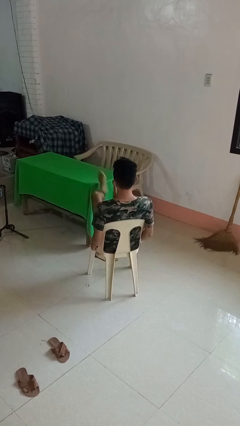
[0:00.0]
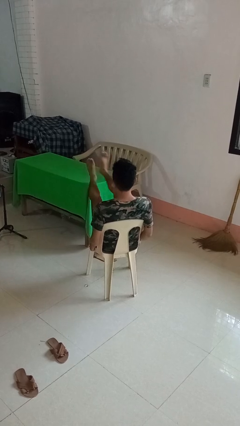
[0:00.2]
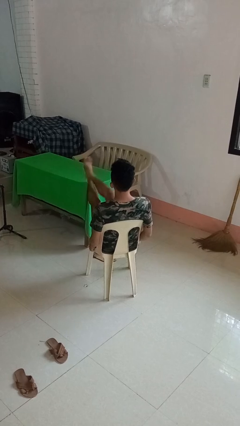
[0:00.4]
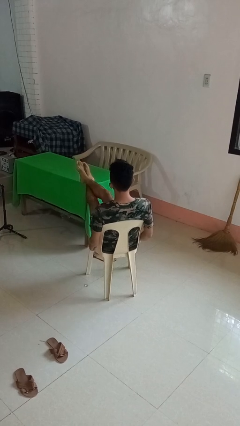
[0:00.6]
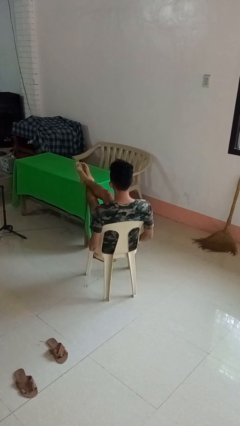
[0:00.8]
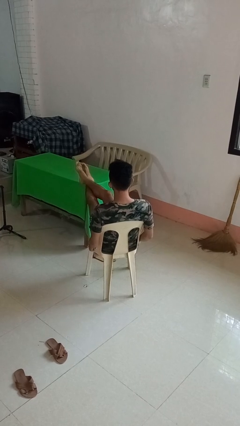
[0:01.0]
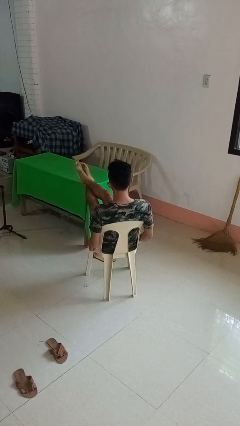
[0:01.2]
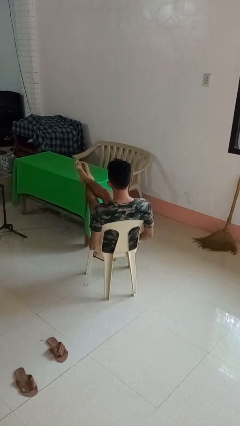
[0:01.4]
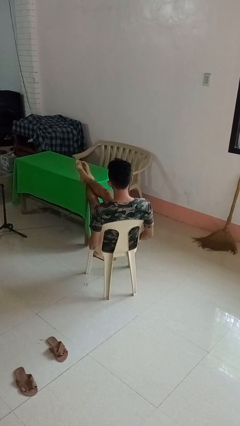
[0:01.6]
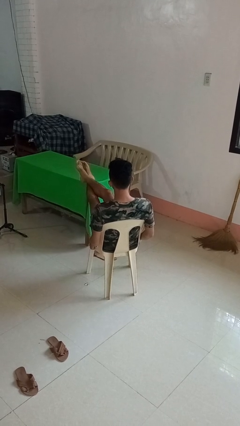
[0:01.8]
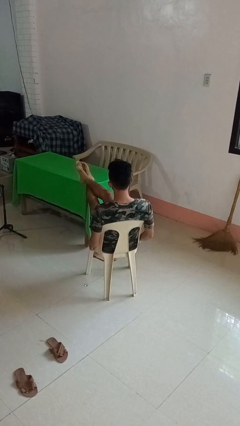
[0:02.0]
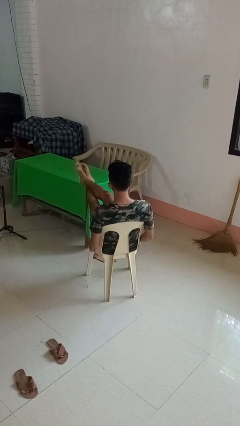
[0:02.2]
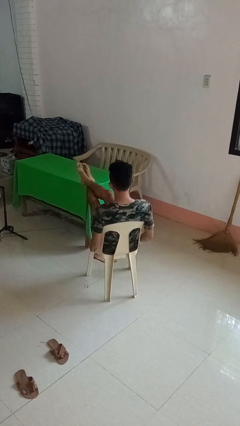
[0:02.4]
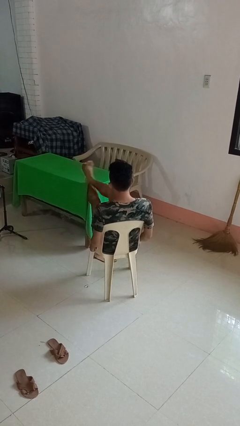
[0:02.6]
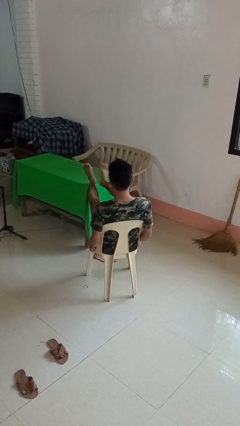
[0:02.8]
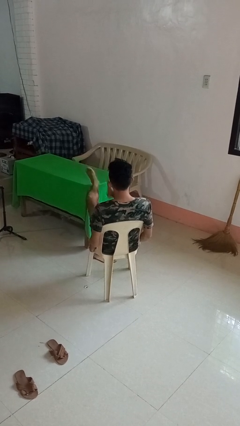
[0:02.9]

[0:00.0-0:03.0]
person puts feet up

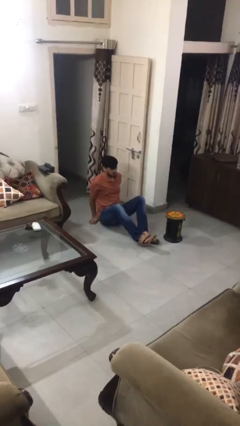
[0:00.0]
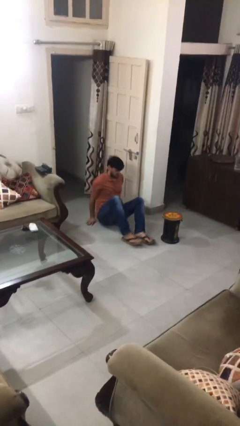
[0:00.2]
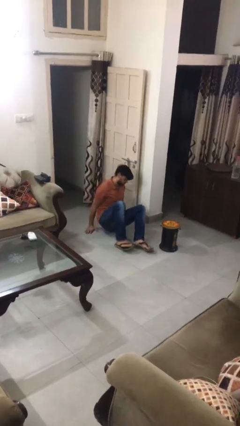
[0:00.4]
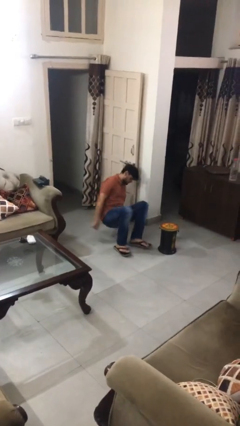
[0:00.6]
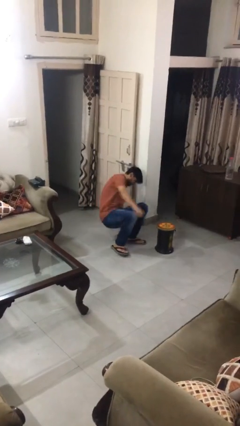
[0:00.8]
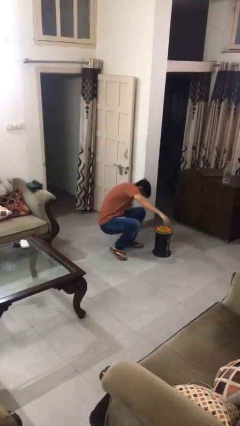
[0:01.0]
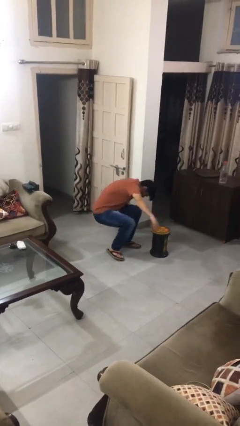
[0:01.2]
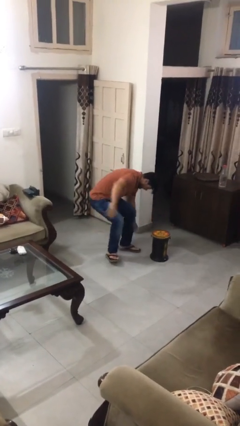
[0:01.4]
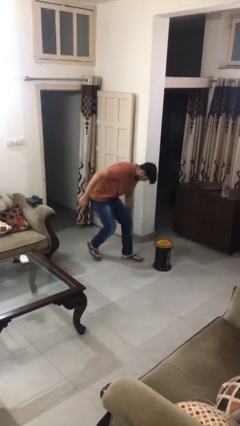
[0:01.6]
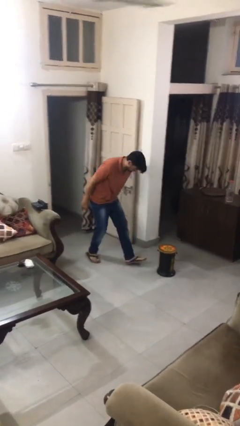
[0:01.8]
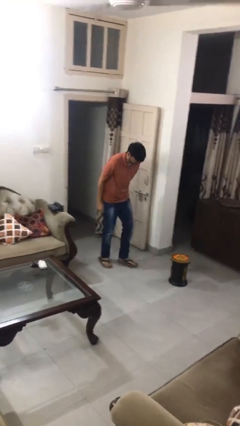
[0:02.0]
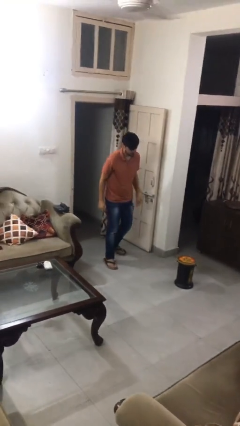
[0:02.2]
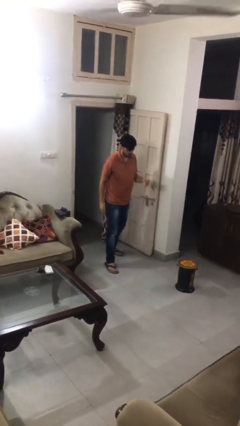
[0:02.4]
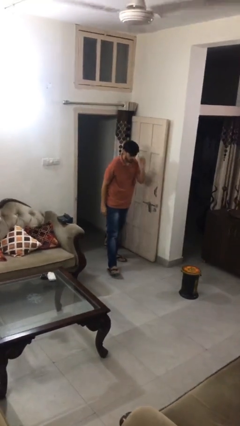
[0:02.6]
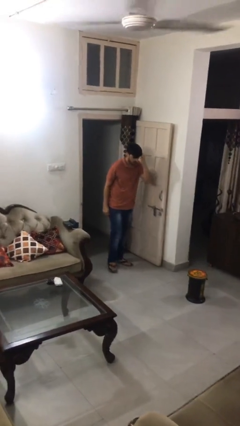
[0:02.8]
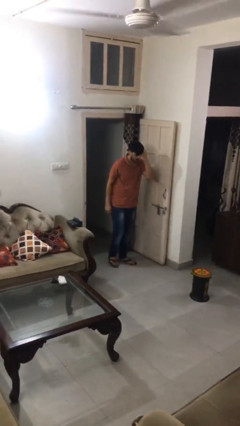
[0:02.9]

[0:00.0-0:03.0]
person stands up from floor

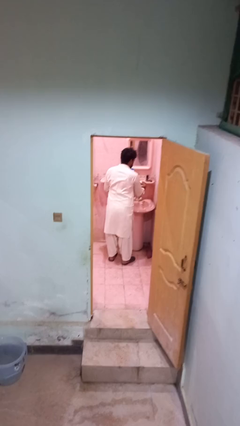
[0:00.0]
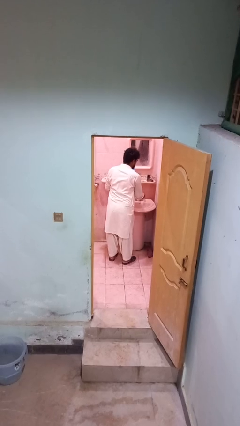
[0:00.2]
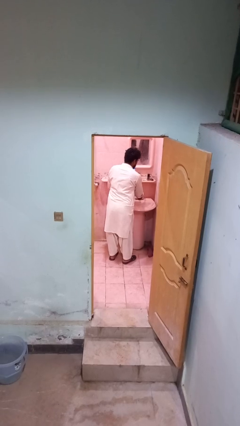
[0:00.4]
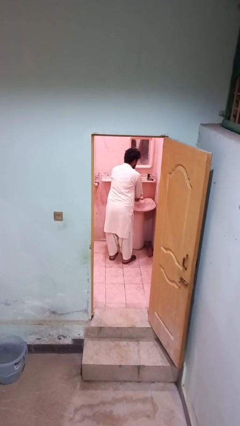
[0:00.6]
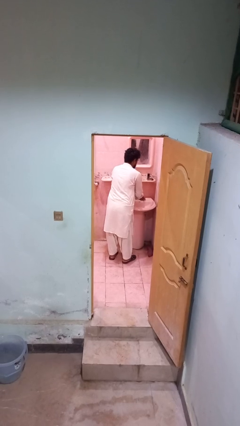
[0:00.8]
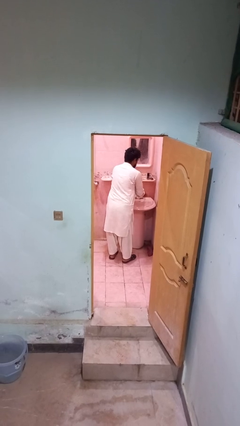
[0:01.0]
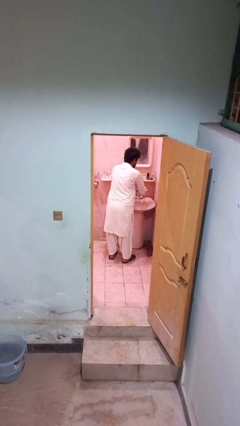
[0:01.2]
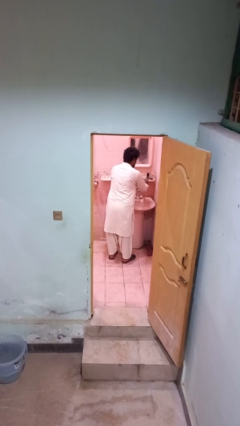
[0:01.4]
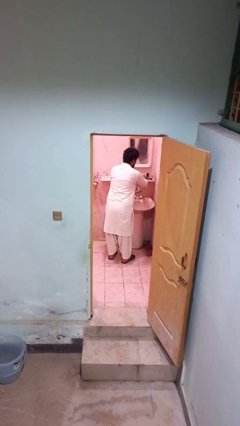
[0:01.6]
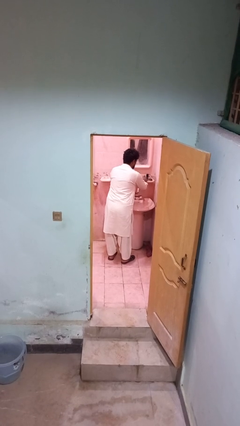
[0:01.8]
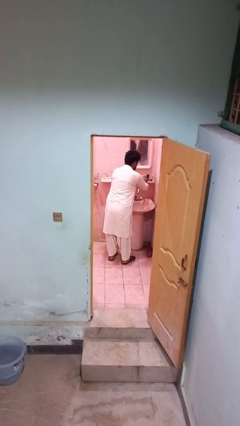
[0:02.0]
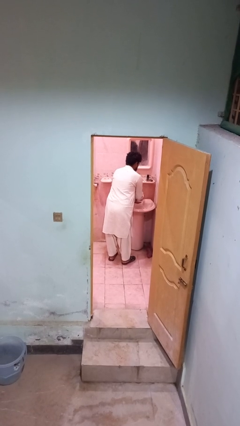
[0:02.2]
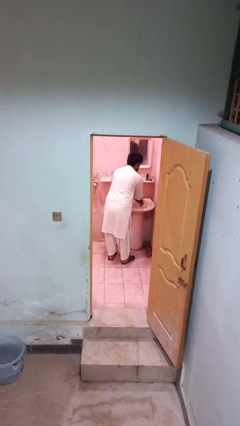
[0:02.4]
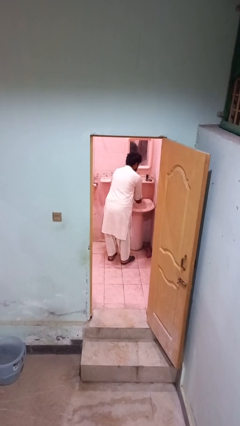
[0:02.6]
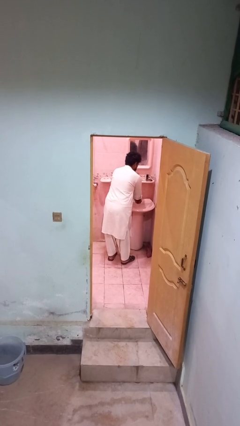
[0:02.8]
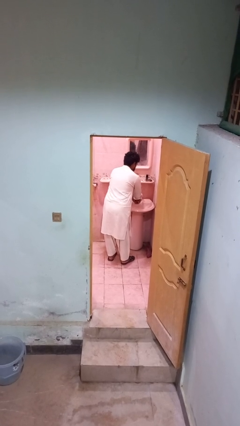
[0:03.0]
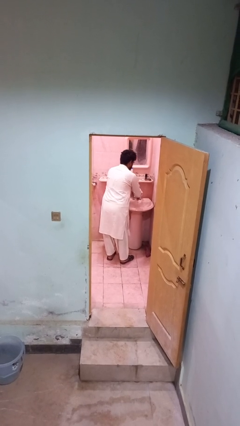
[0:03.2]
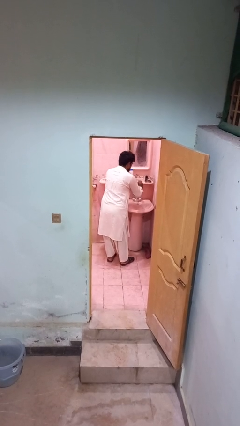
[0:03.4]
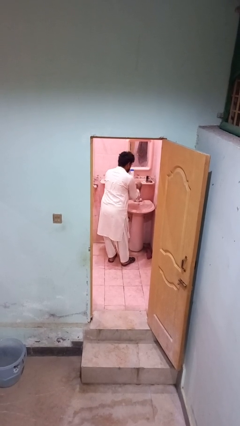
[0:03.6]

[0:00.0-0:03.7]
person washes hands

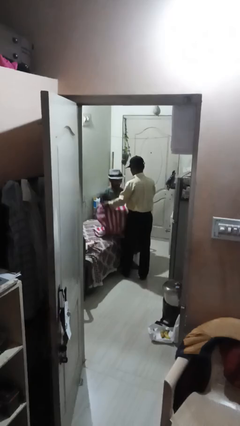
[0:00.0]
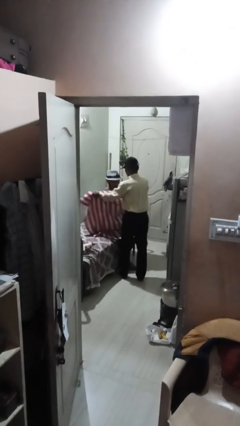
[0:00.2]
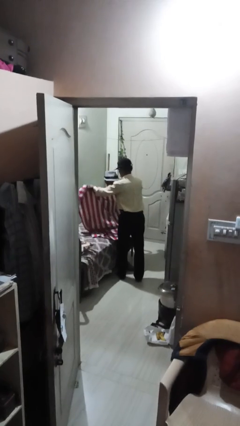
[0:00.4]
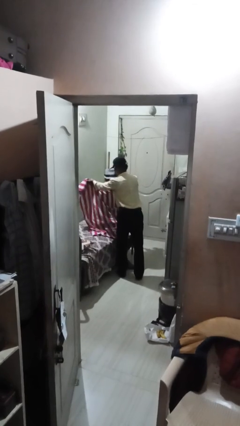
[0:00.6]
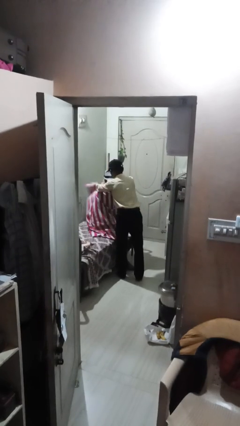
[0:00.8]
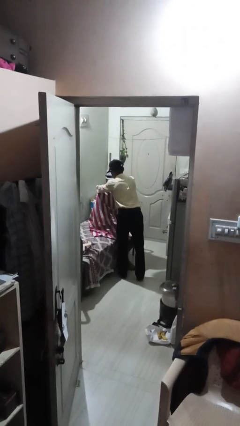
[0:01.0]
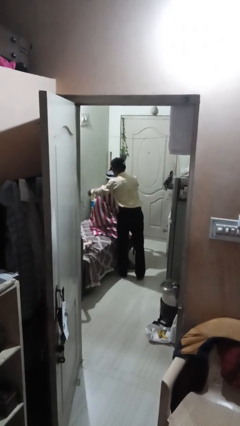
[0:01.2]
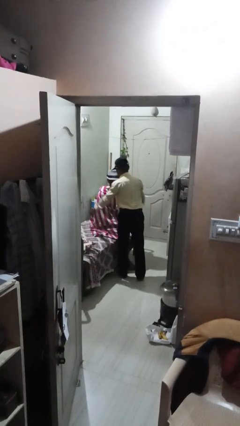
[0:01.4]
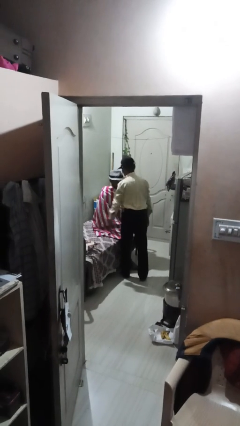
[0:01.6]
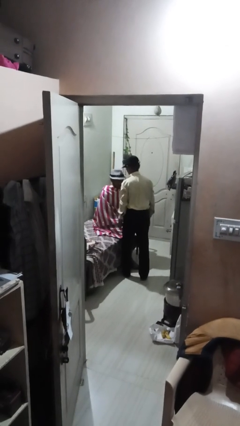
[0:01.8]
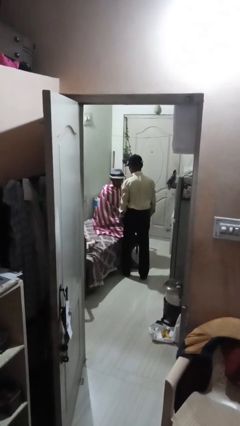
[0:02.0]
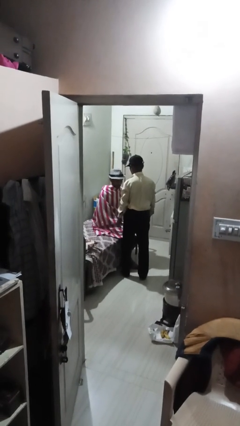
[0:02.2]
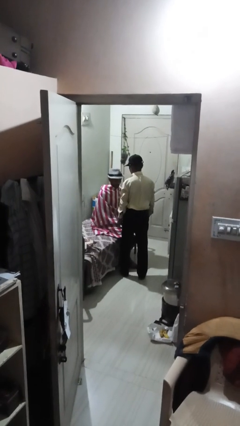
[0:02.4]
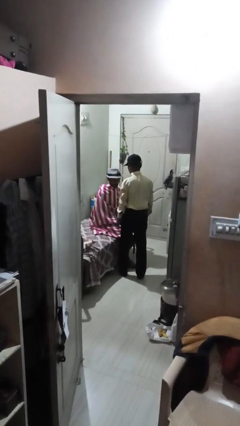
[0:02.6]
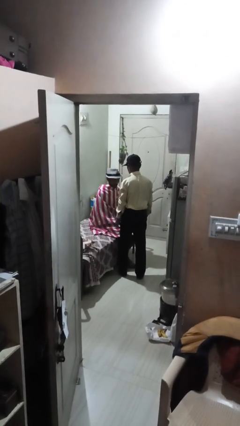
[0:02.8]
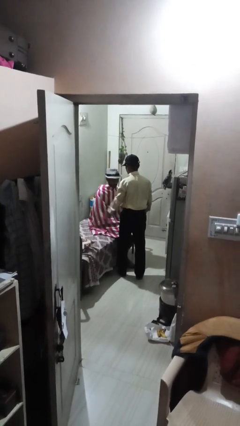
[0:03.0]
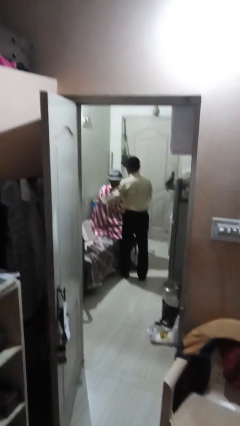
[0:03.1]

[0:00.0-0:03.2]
person covers friend with blanket

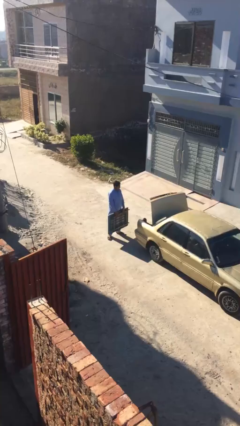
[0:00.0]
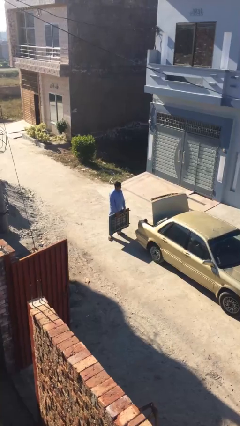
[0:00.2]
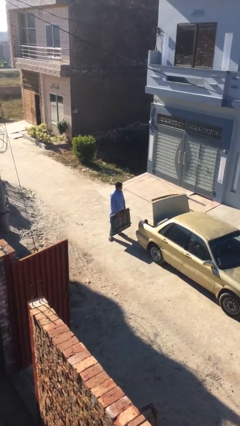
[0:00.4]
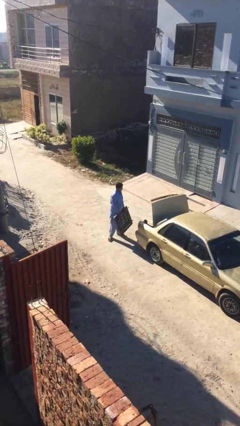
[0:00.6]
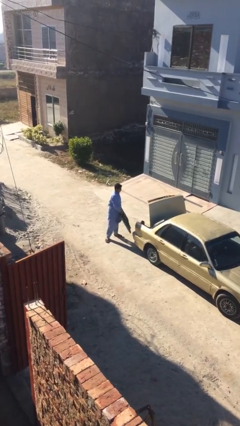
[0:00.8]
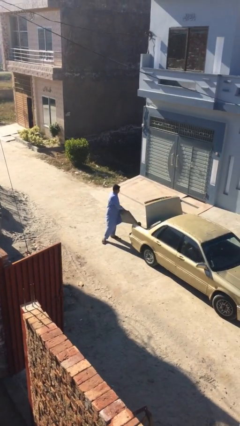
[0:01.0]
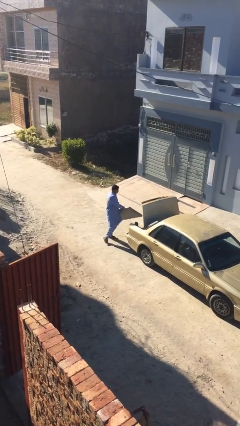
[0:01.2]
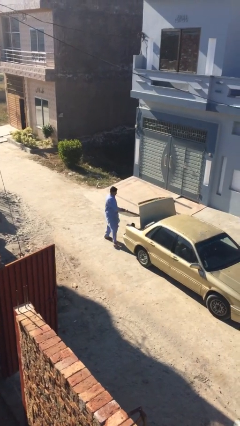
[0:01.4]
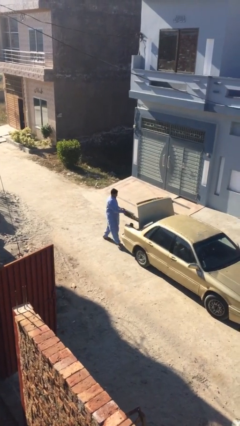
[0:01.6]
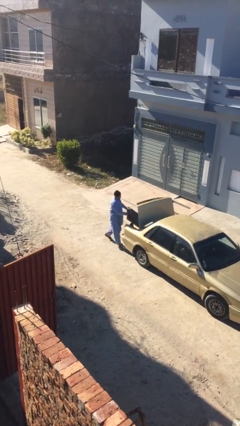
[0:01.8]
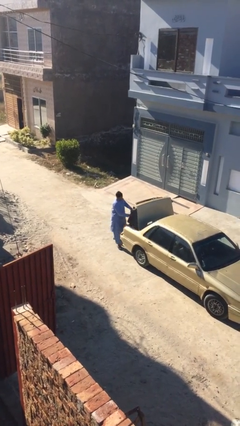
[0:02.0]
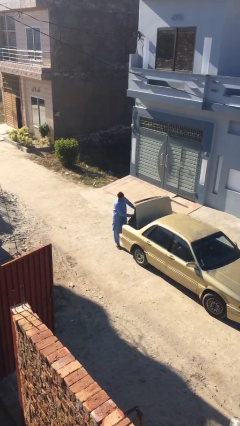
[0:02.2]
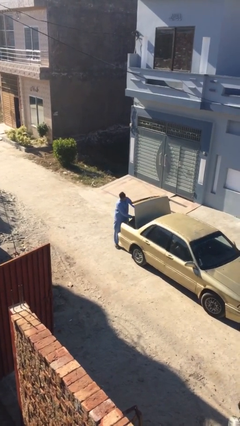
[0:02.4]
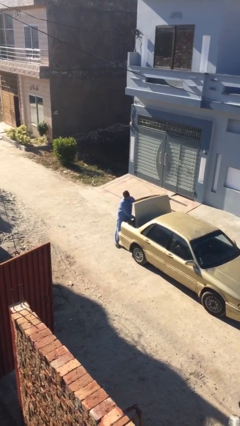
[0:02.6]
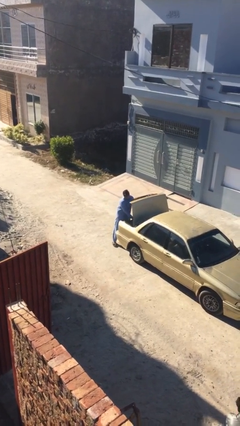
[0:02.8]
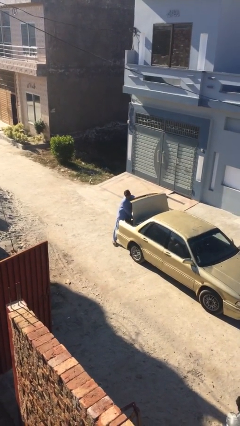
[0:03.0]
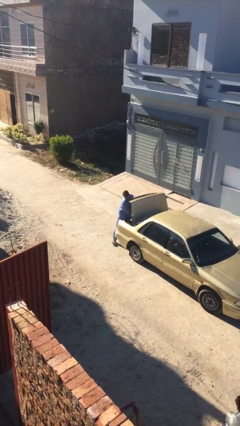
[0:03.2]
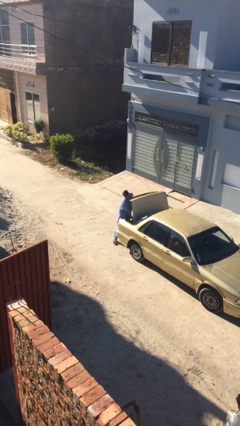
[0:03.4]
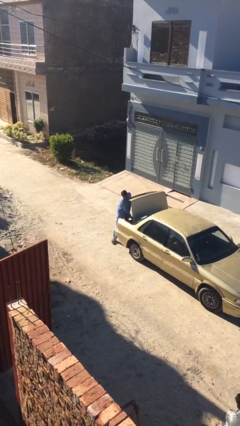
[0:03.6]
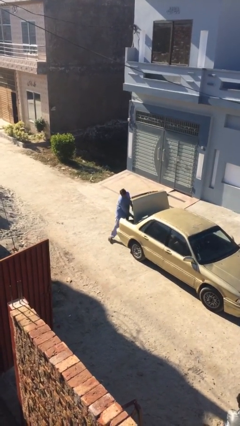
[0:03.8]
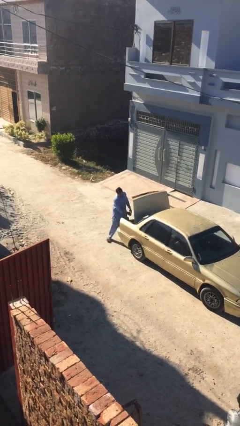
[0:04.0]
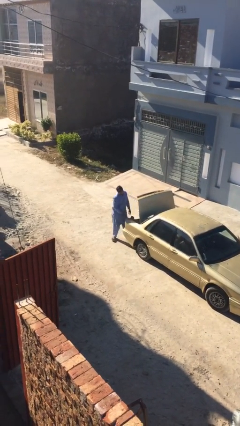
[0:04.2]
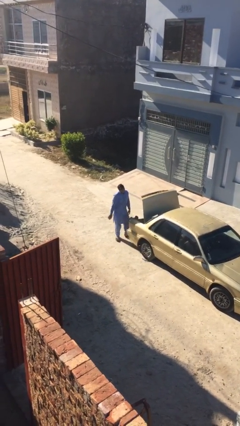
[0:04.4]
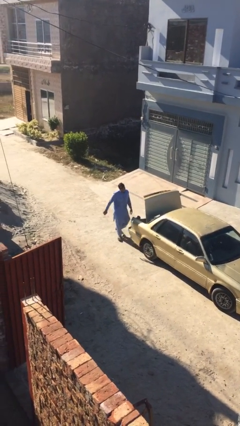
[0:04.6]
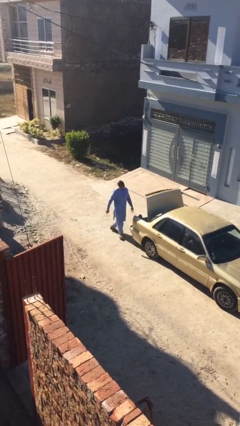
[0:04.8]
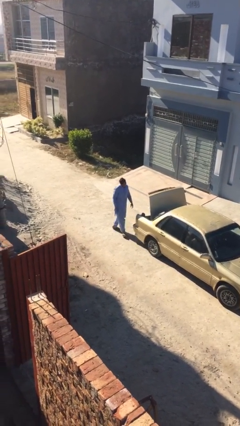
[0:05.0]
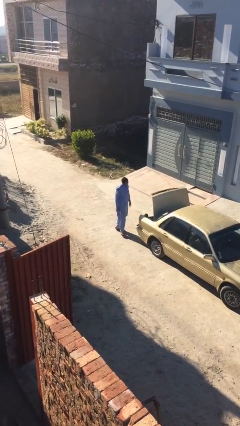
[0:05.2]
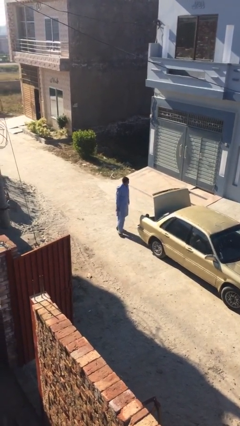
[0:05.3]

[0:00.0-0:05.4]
person loads car
